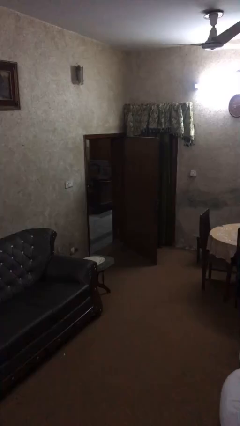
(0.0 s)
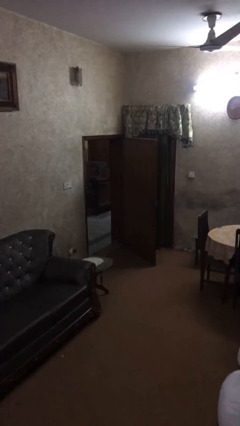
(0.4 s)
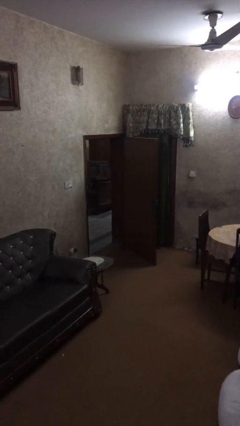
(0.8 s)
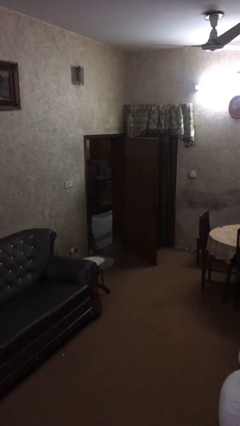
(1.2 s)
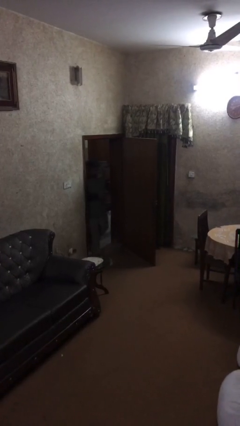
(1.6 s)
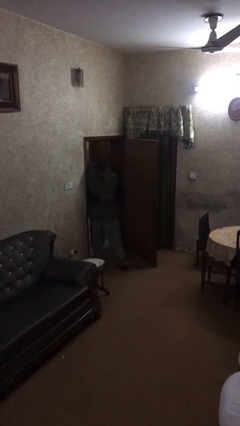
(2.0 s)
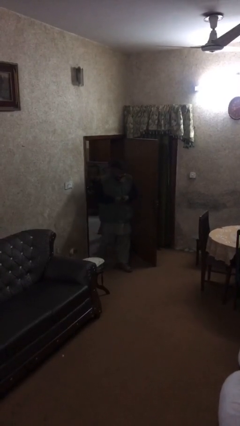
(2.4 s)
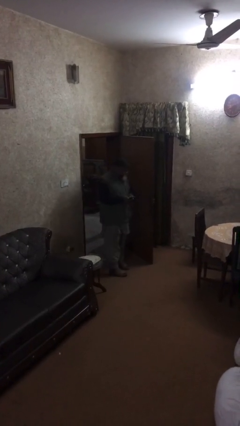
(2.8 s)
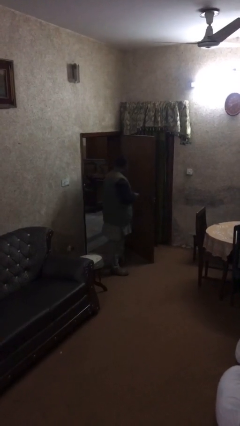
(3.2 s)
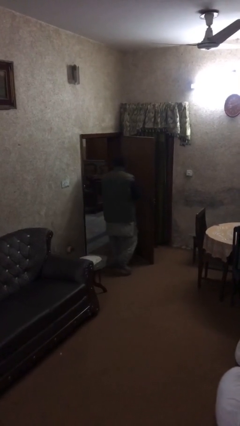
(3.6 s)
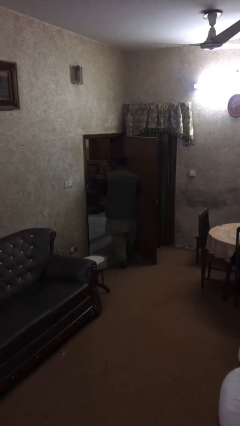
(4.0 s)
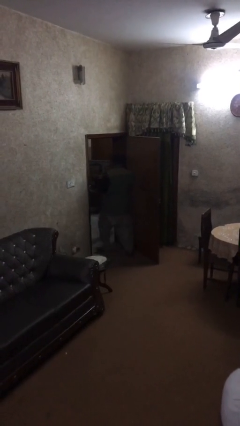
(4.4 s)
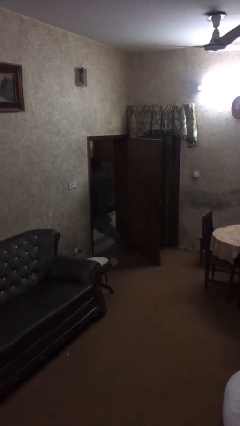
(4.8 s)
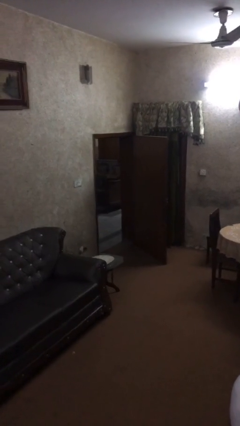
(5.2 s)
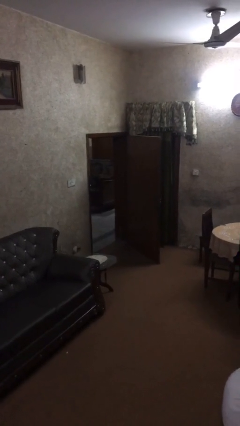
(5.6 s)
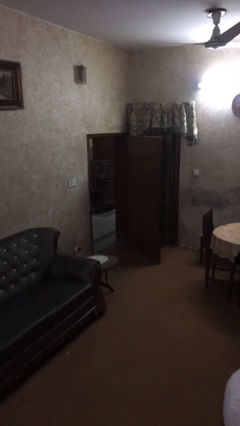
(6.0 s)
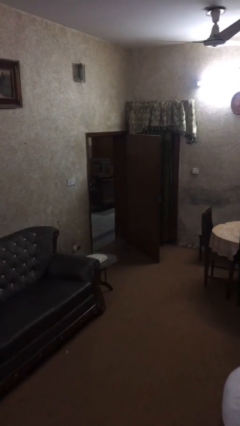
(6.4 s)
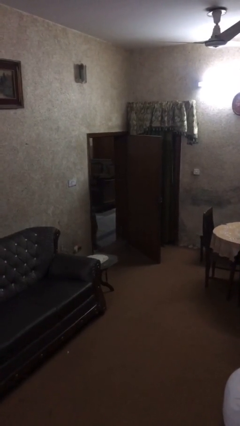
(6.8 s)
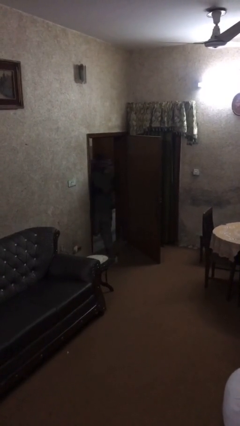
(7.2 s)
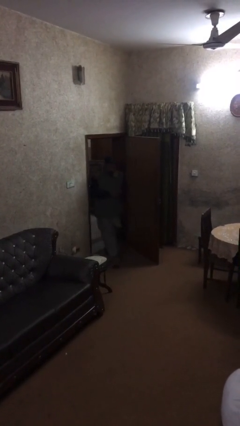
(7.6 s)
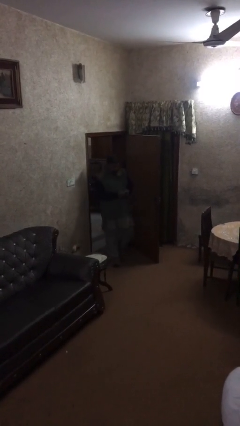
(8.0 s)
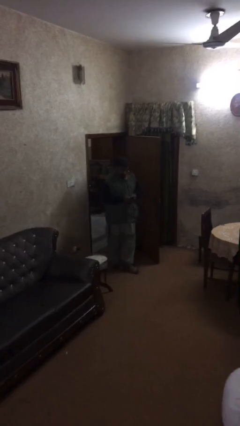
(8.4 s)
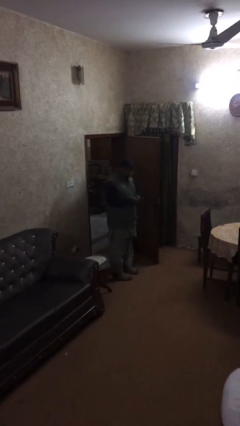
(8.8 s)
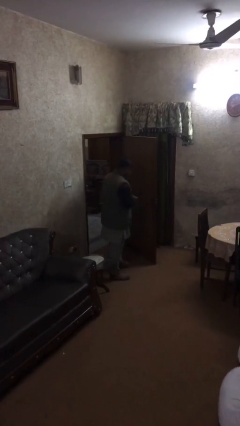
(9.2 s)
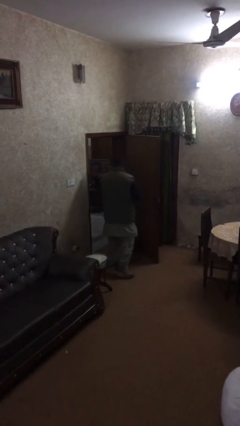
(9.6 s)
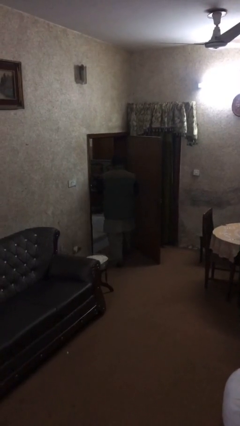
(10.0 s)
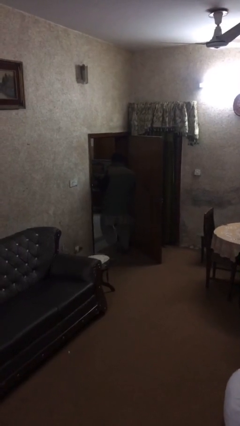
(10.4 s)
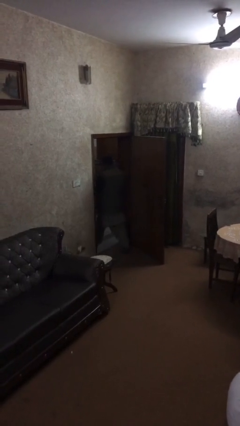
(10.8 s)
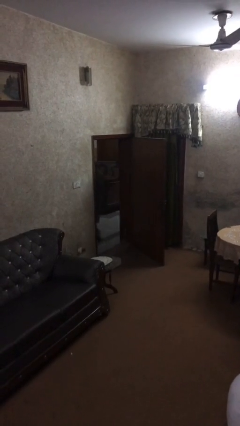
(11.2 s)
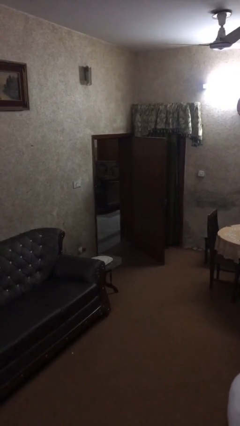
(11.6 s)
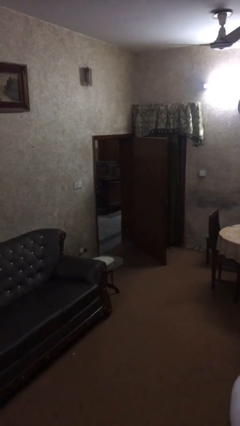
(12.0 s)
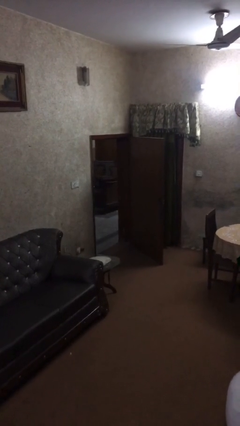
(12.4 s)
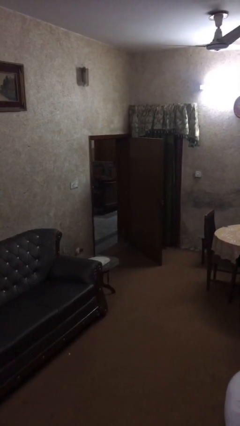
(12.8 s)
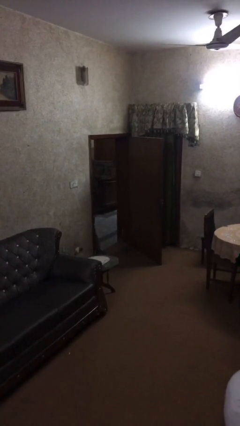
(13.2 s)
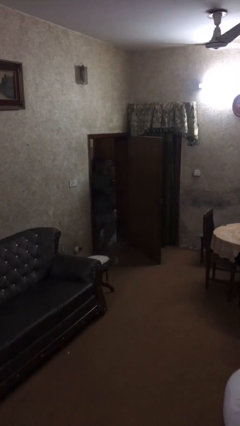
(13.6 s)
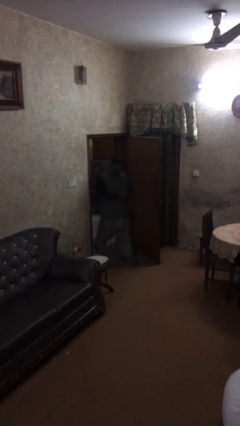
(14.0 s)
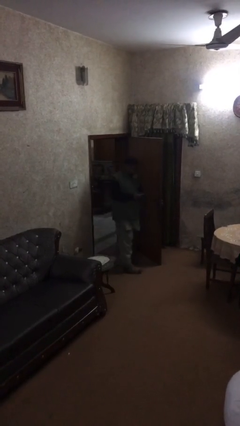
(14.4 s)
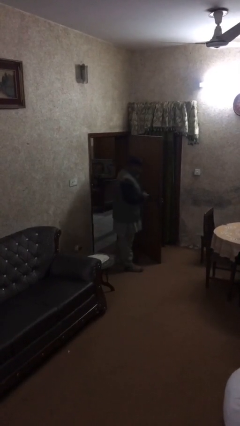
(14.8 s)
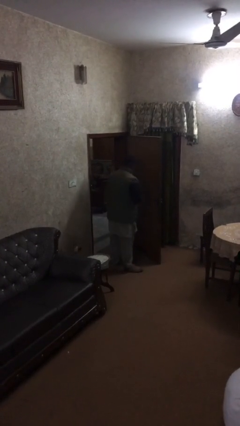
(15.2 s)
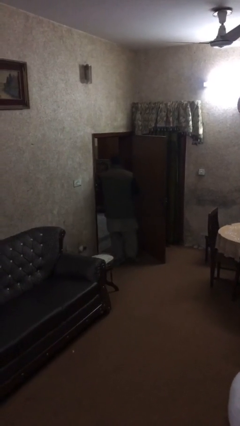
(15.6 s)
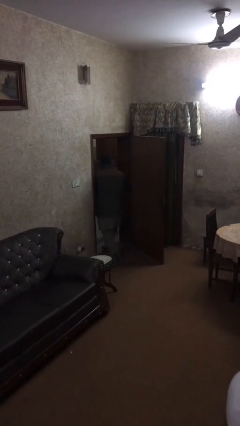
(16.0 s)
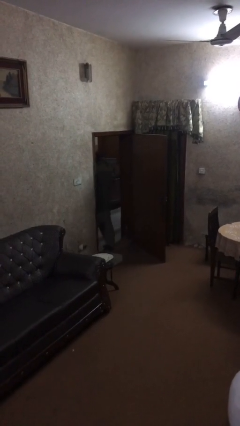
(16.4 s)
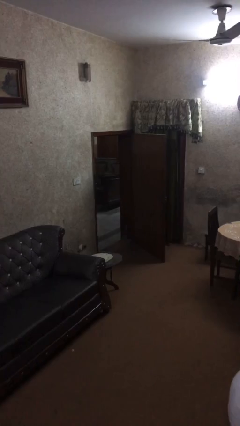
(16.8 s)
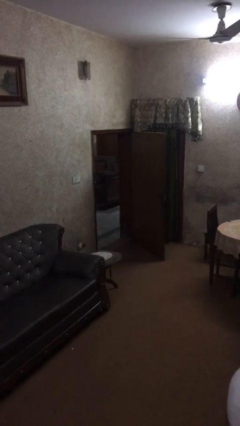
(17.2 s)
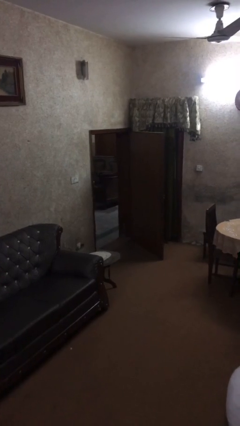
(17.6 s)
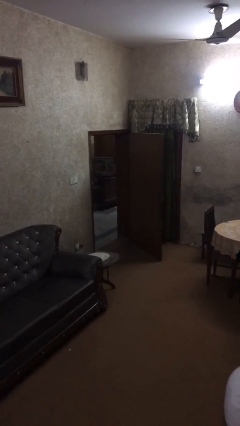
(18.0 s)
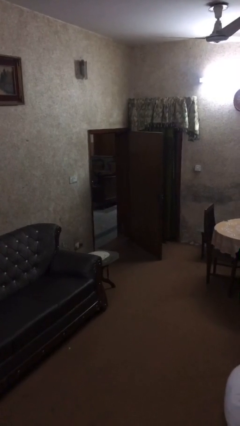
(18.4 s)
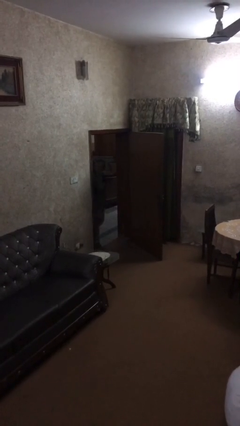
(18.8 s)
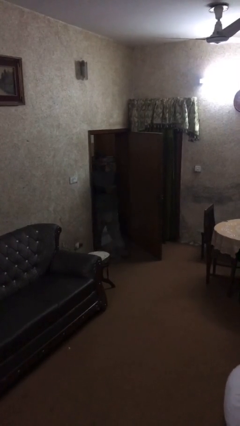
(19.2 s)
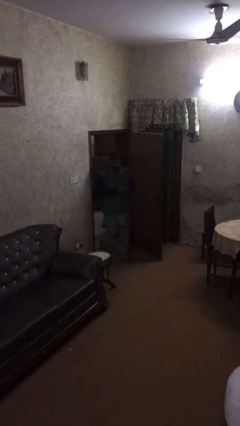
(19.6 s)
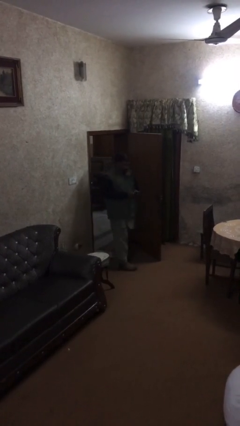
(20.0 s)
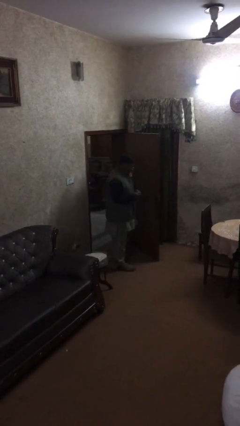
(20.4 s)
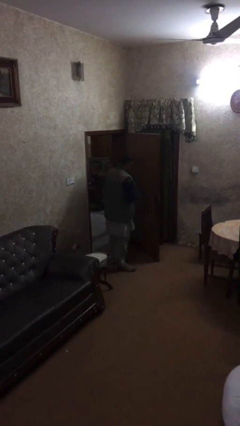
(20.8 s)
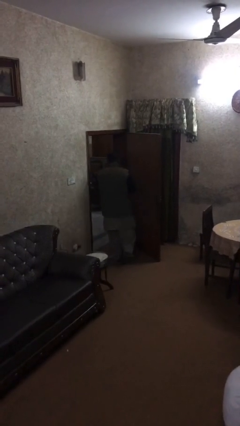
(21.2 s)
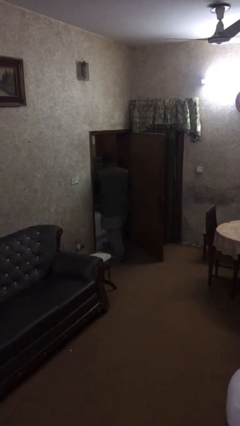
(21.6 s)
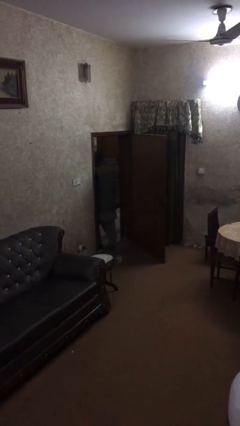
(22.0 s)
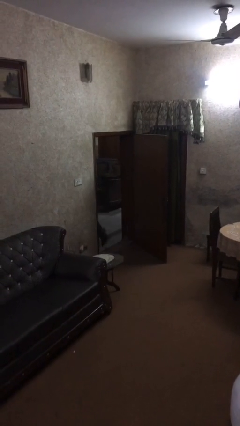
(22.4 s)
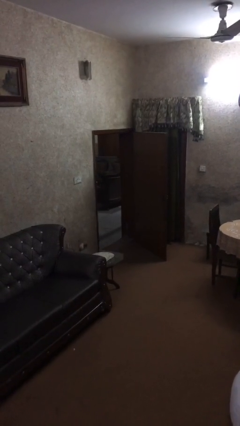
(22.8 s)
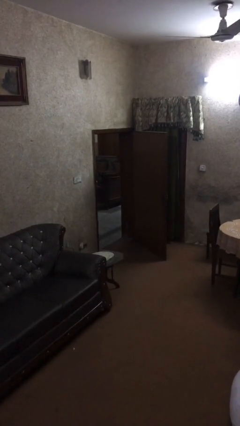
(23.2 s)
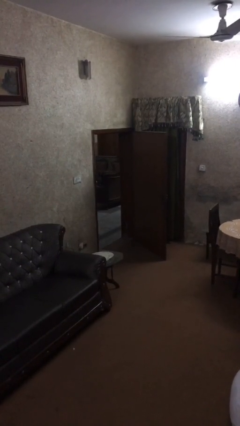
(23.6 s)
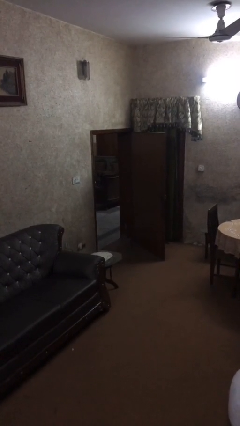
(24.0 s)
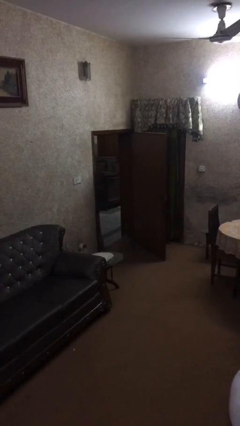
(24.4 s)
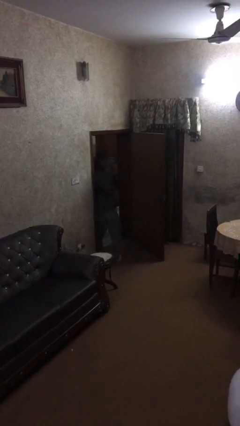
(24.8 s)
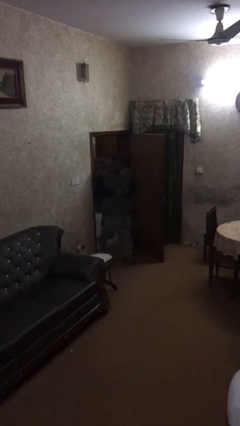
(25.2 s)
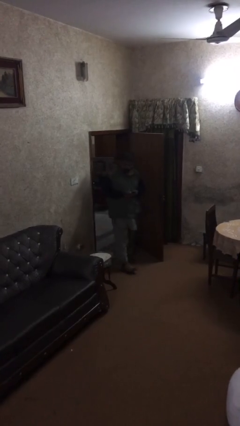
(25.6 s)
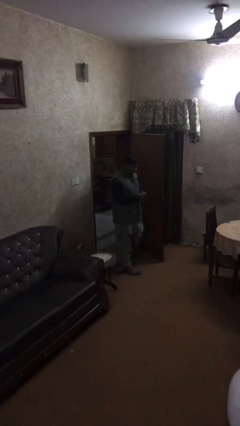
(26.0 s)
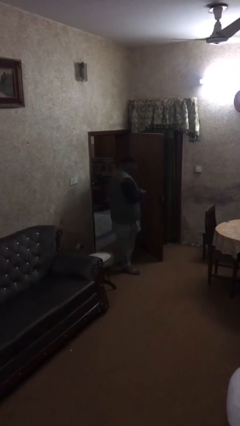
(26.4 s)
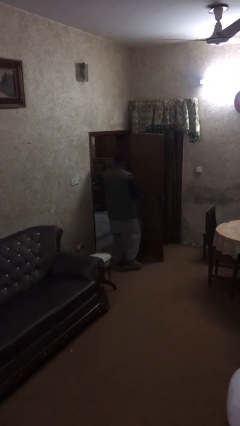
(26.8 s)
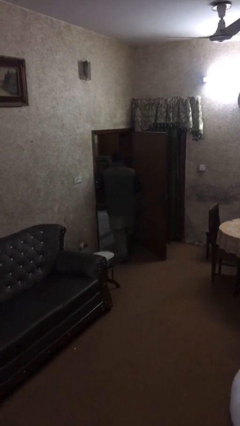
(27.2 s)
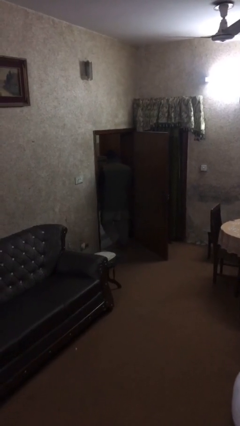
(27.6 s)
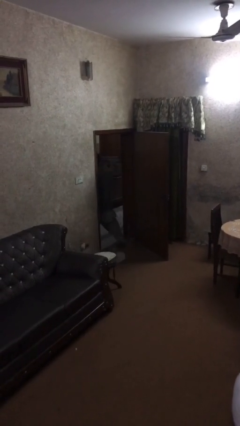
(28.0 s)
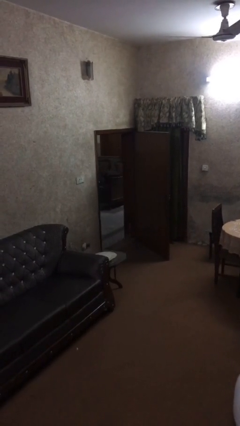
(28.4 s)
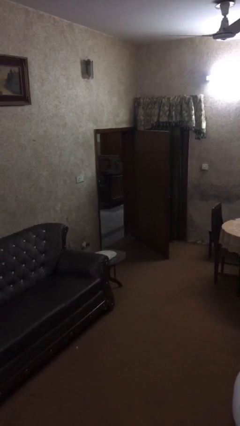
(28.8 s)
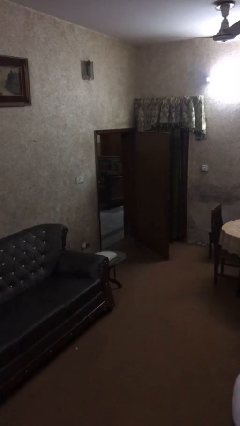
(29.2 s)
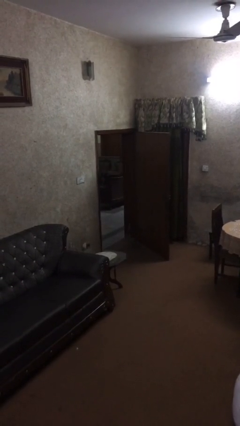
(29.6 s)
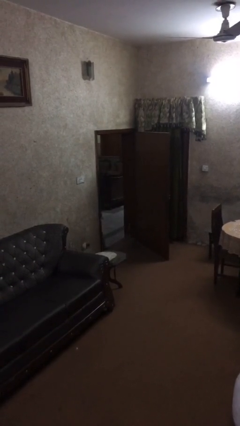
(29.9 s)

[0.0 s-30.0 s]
person texts on phone

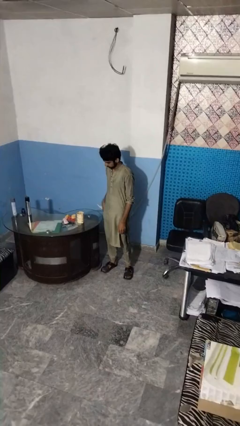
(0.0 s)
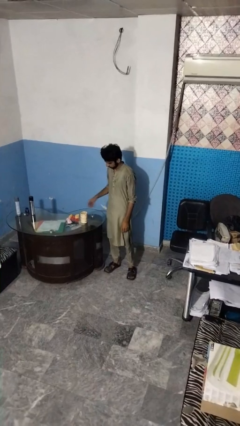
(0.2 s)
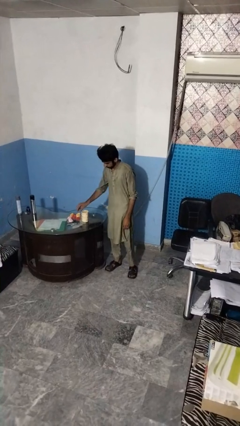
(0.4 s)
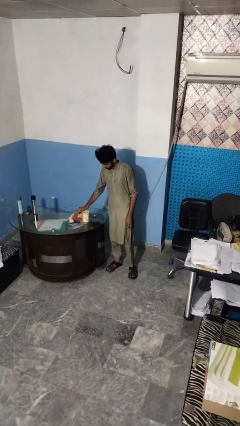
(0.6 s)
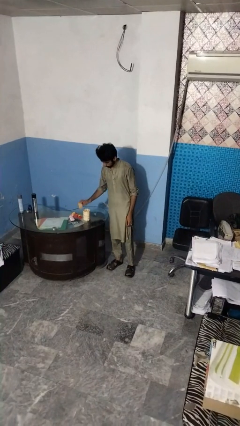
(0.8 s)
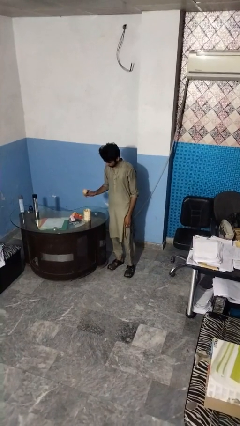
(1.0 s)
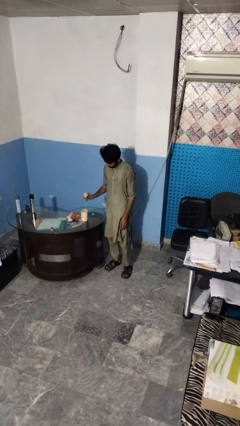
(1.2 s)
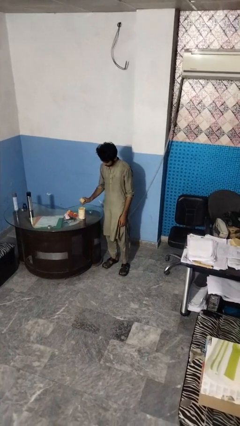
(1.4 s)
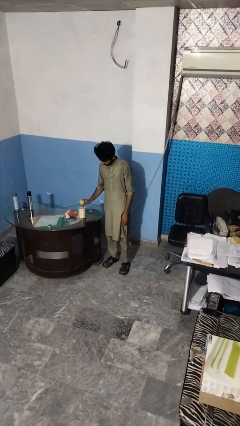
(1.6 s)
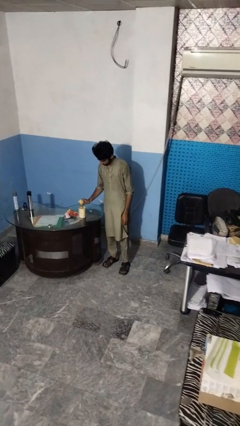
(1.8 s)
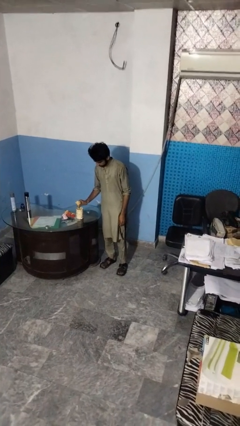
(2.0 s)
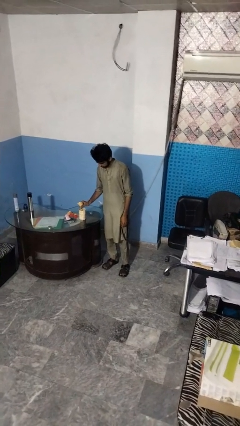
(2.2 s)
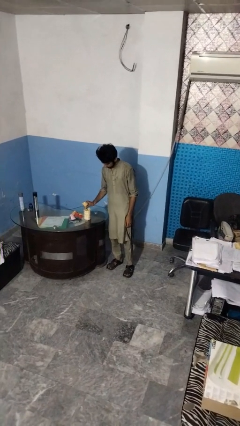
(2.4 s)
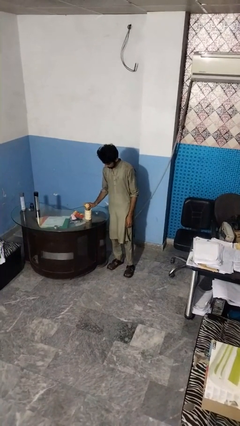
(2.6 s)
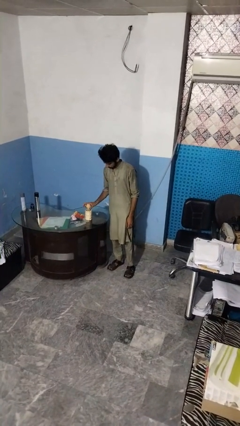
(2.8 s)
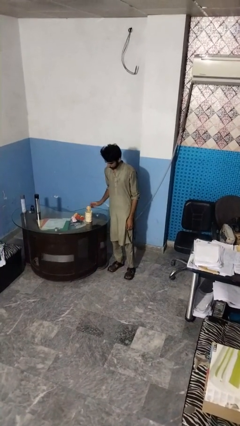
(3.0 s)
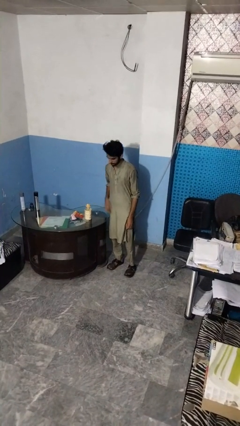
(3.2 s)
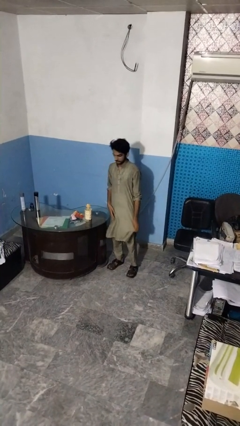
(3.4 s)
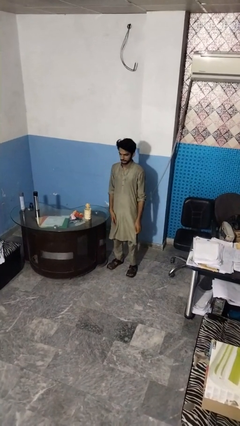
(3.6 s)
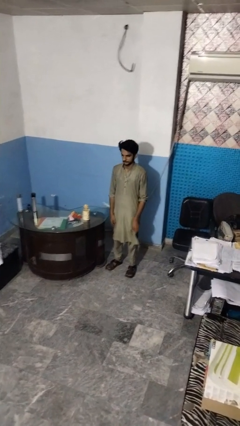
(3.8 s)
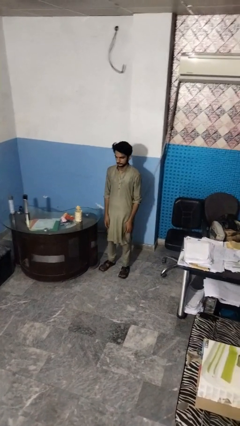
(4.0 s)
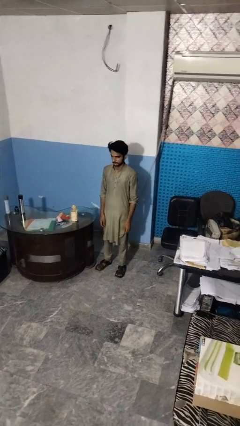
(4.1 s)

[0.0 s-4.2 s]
person arranges flowers in vase
